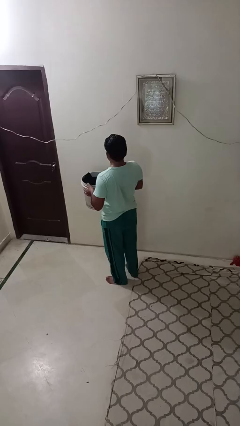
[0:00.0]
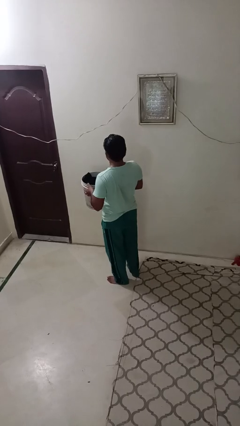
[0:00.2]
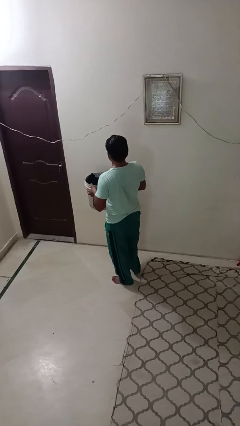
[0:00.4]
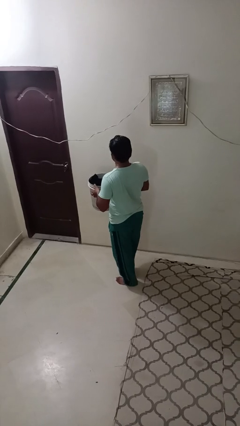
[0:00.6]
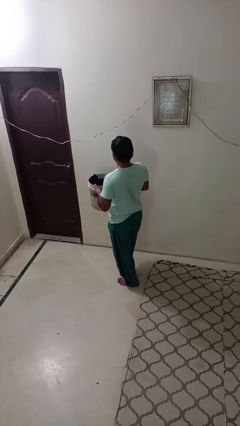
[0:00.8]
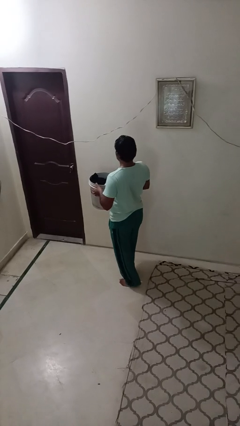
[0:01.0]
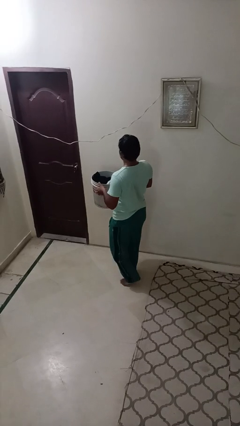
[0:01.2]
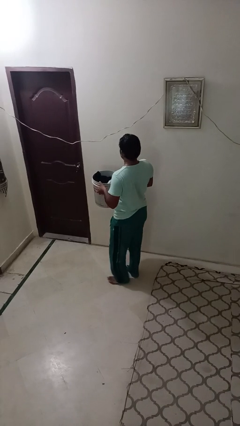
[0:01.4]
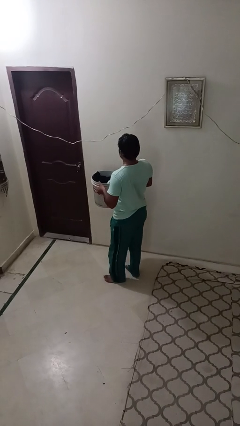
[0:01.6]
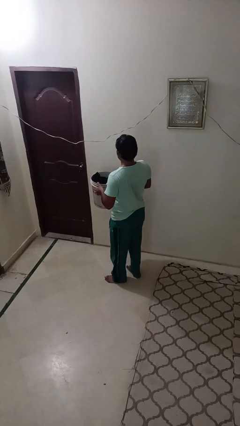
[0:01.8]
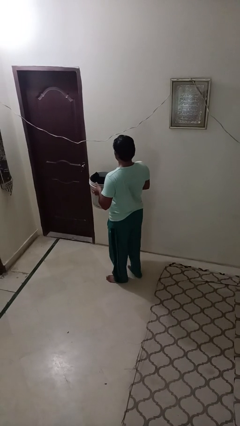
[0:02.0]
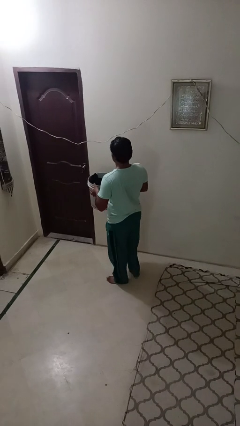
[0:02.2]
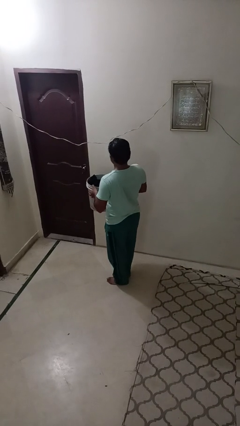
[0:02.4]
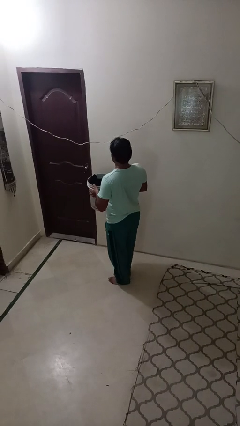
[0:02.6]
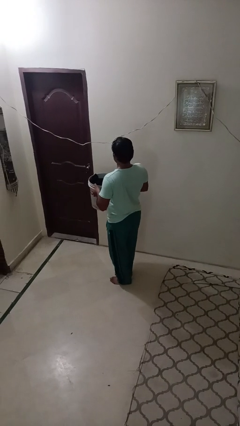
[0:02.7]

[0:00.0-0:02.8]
person carries laundry basket

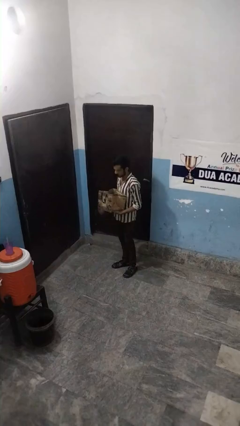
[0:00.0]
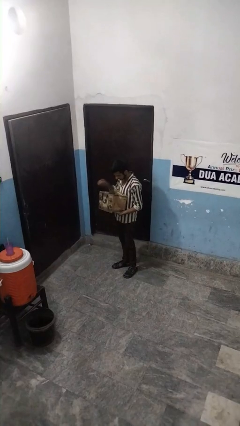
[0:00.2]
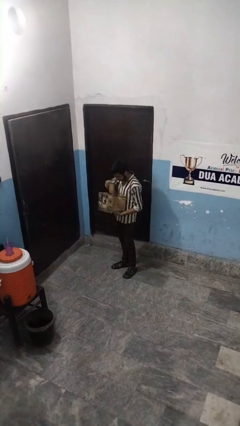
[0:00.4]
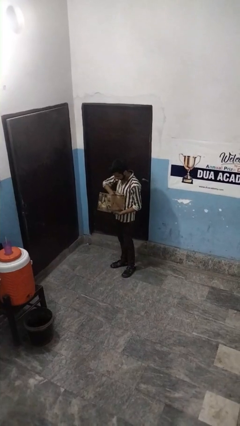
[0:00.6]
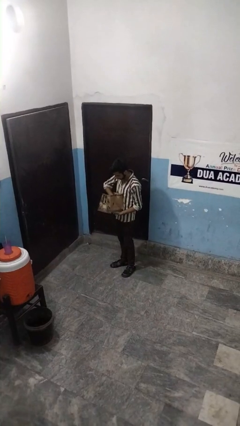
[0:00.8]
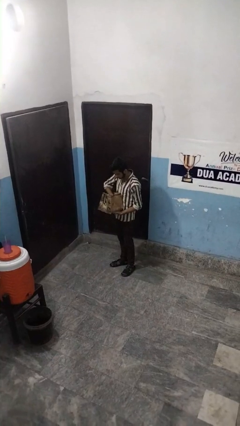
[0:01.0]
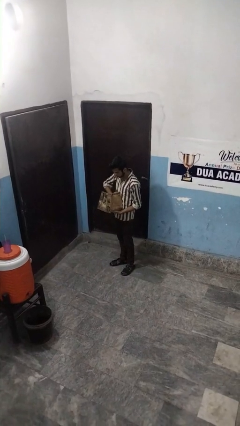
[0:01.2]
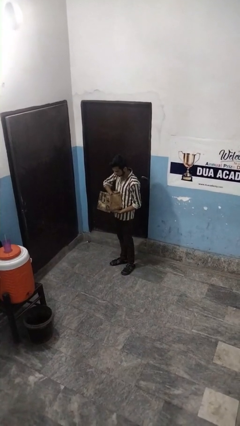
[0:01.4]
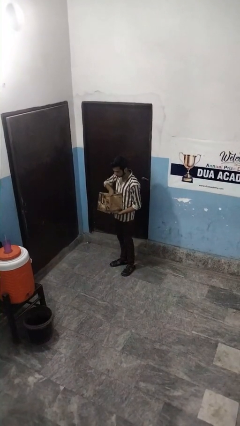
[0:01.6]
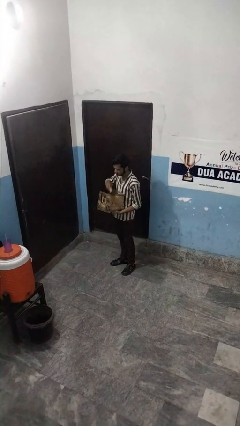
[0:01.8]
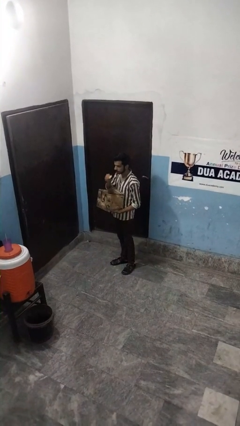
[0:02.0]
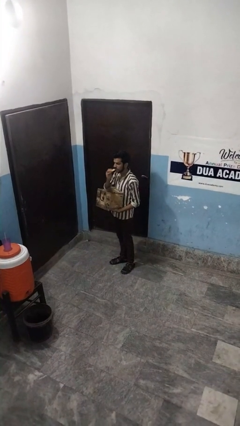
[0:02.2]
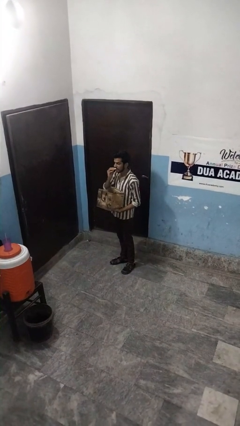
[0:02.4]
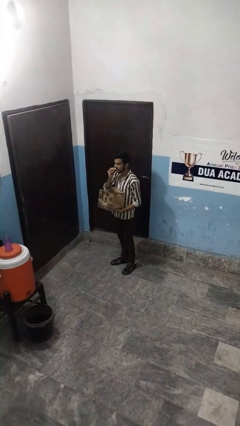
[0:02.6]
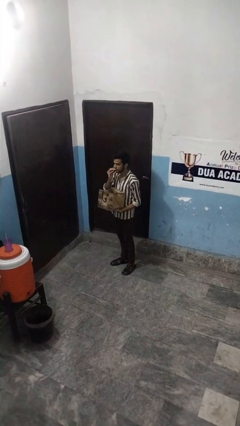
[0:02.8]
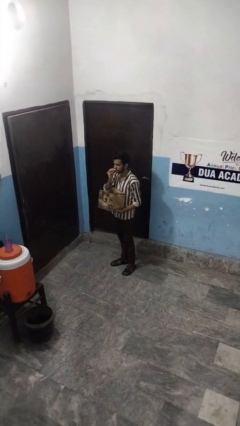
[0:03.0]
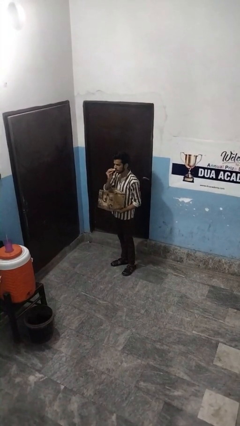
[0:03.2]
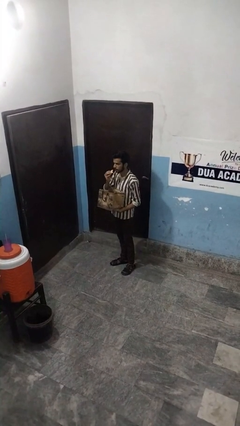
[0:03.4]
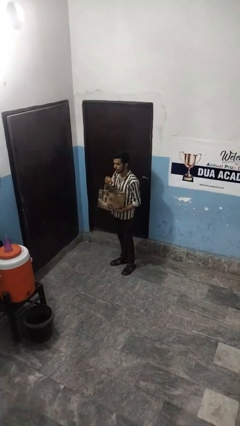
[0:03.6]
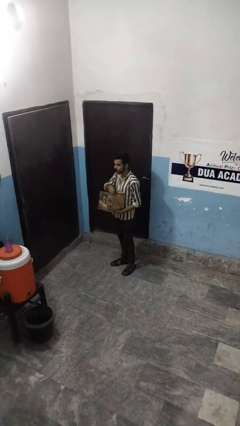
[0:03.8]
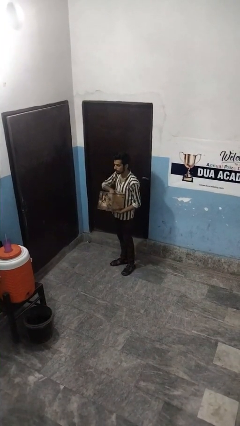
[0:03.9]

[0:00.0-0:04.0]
person eats snack from bag

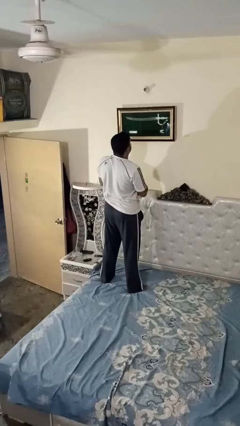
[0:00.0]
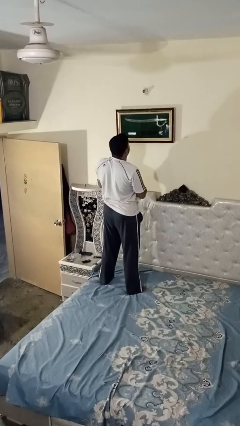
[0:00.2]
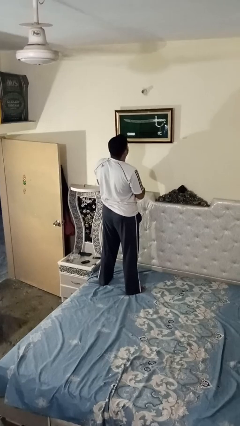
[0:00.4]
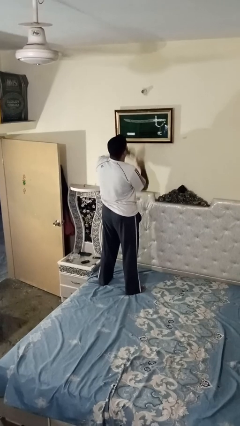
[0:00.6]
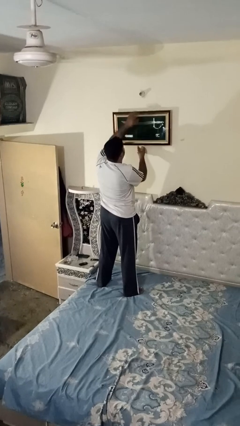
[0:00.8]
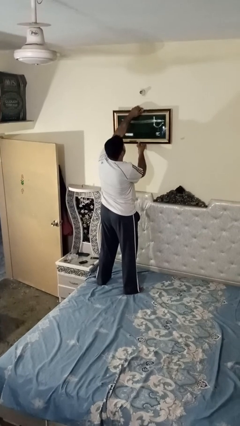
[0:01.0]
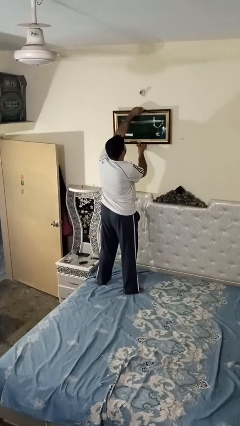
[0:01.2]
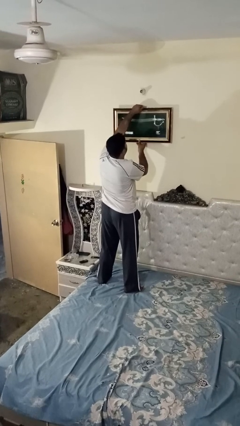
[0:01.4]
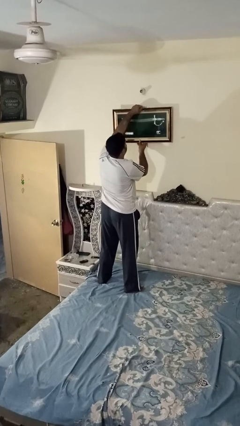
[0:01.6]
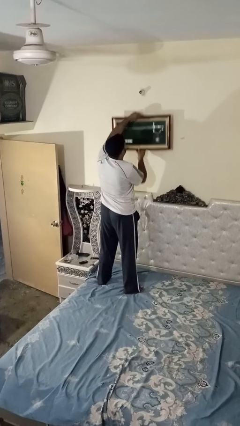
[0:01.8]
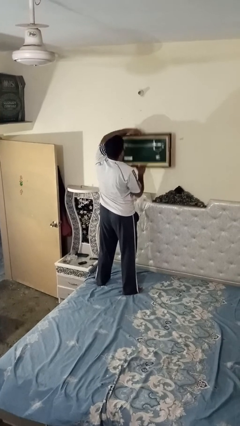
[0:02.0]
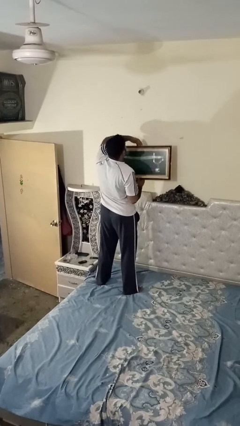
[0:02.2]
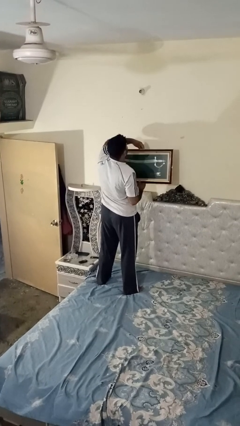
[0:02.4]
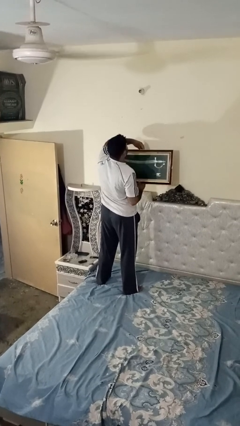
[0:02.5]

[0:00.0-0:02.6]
person takes down picture frame

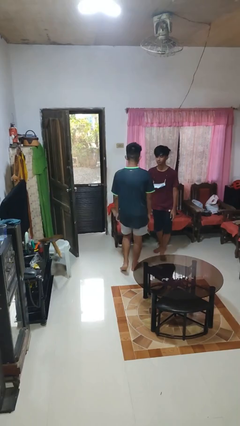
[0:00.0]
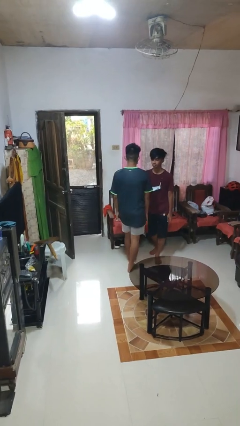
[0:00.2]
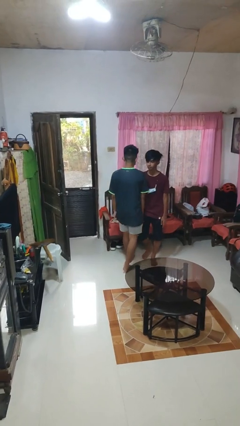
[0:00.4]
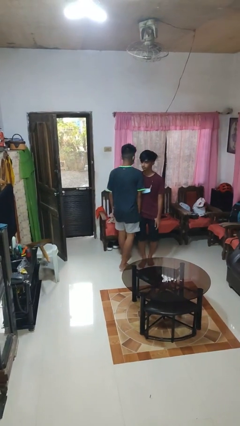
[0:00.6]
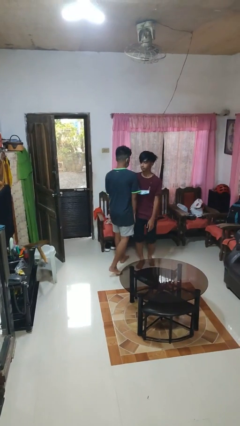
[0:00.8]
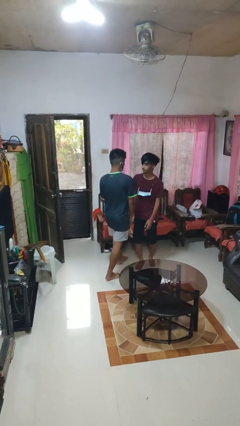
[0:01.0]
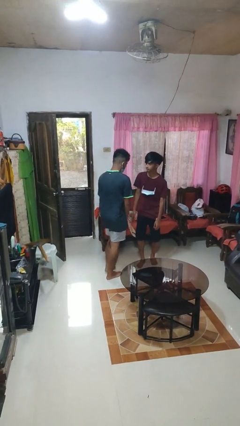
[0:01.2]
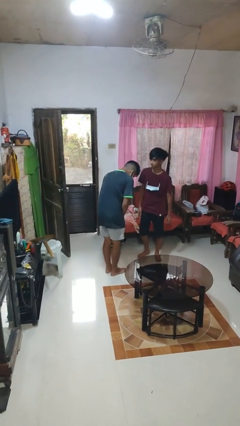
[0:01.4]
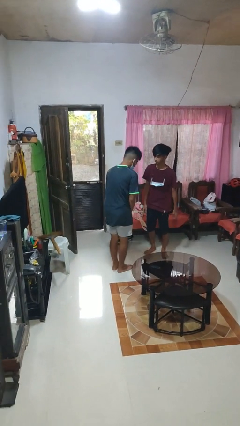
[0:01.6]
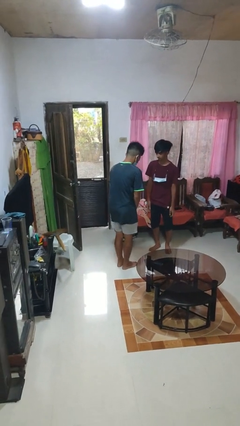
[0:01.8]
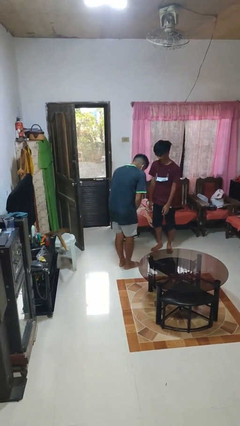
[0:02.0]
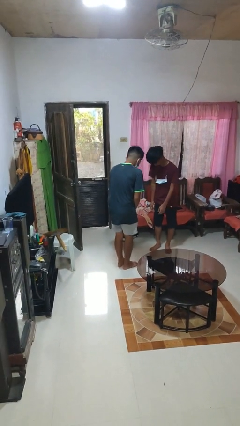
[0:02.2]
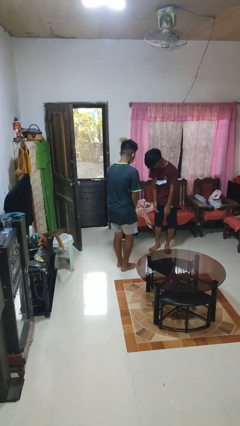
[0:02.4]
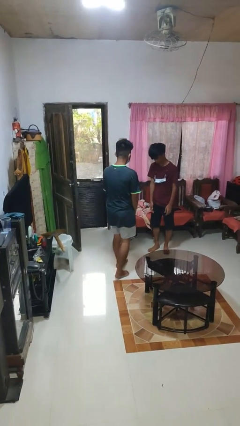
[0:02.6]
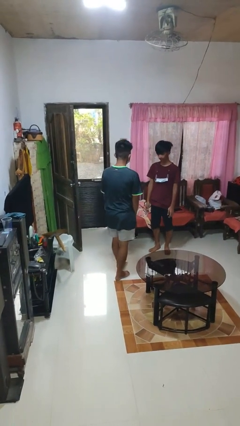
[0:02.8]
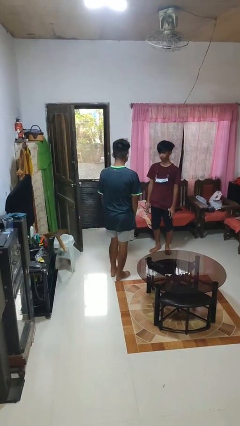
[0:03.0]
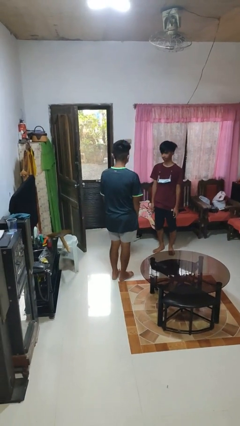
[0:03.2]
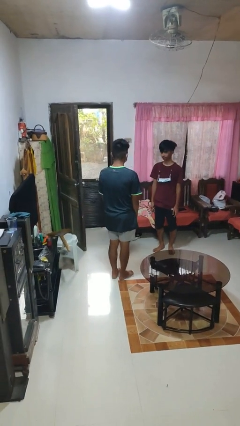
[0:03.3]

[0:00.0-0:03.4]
person bumps into person

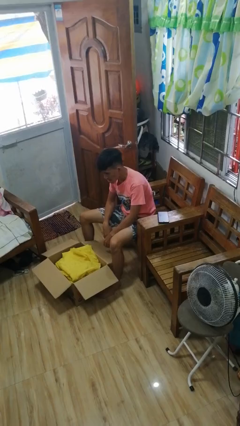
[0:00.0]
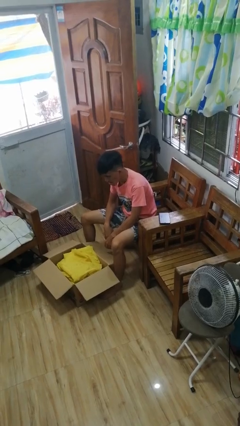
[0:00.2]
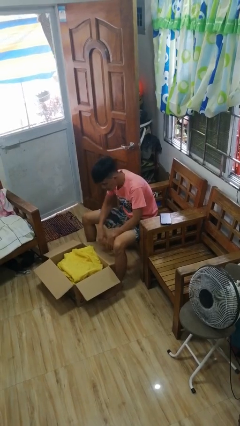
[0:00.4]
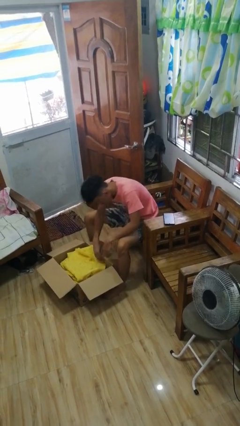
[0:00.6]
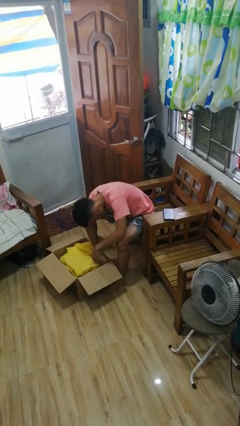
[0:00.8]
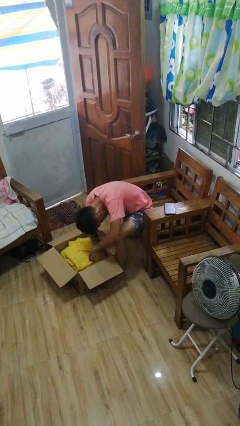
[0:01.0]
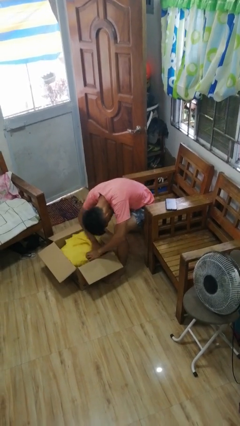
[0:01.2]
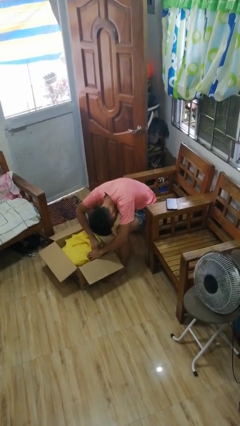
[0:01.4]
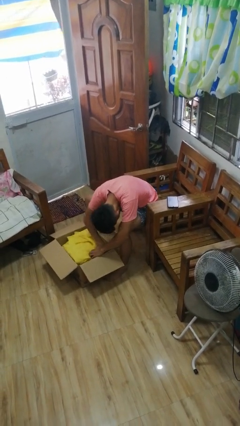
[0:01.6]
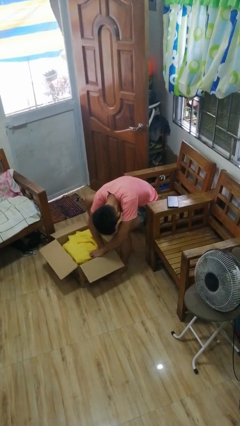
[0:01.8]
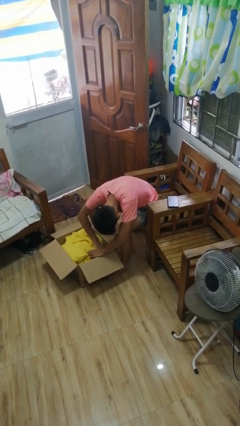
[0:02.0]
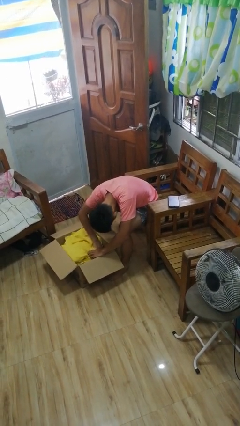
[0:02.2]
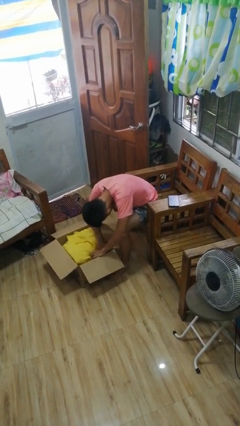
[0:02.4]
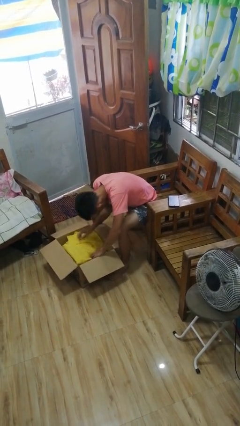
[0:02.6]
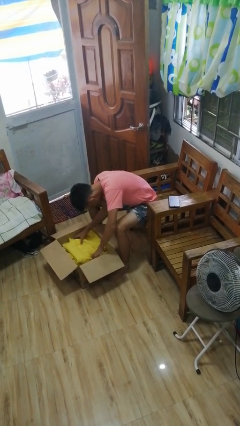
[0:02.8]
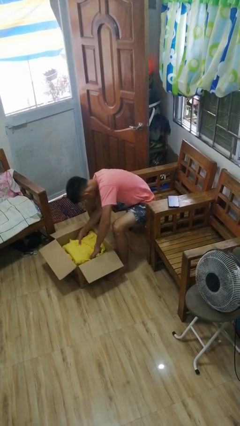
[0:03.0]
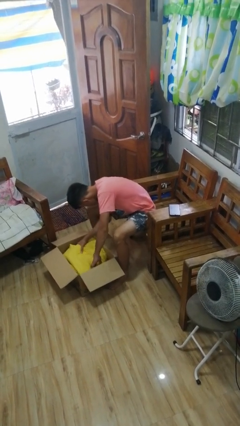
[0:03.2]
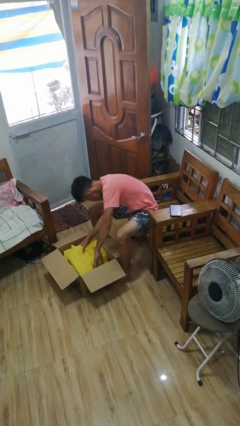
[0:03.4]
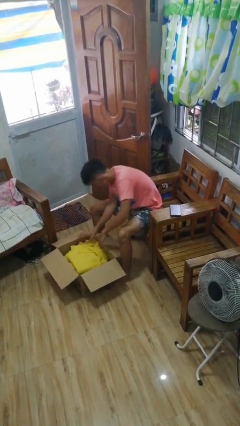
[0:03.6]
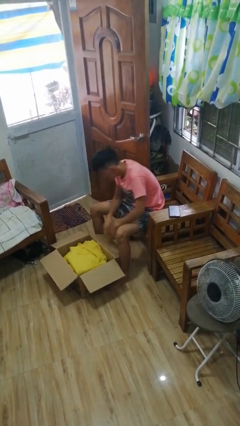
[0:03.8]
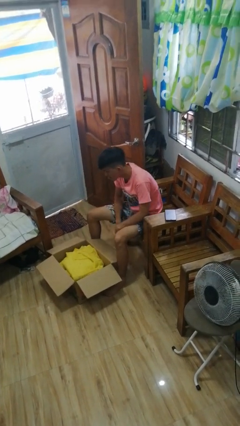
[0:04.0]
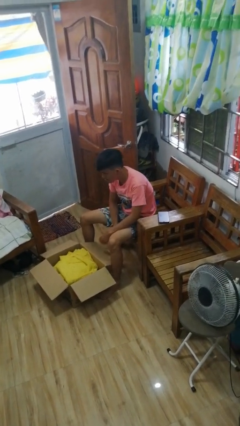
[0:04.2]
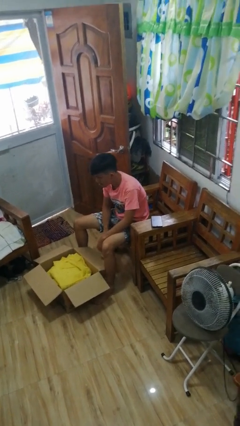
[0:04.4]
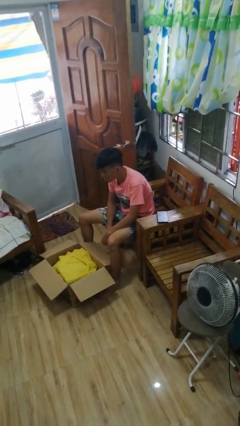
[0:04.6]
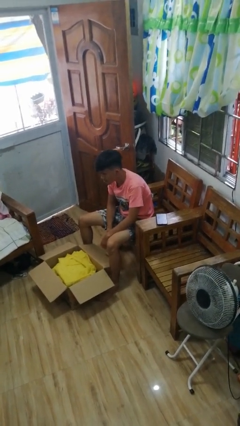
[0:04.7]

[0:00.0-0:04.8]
person searches in box
